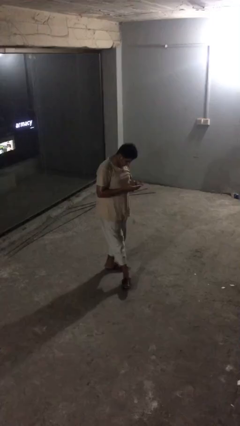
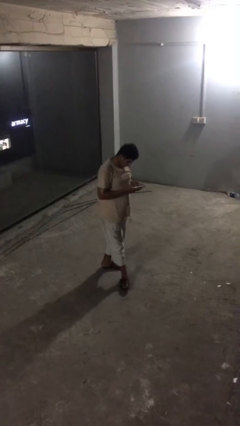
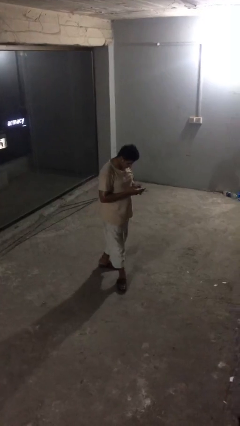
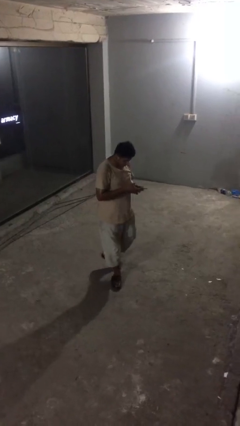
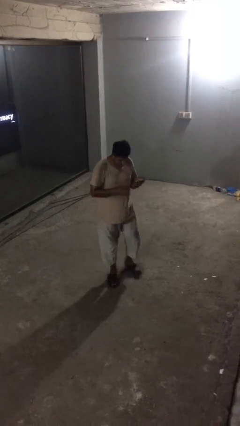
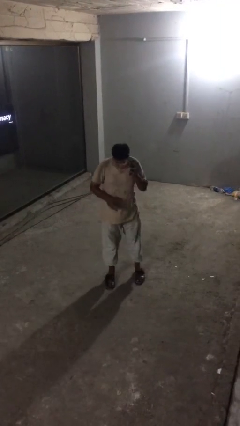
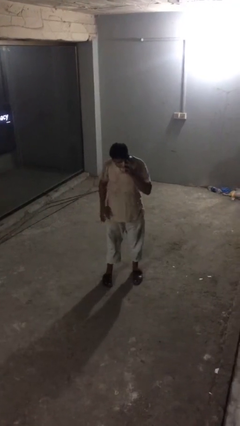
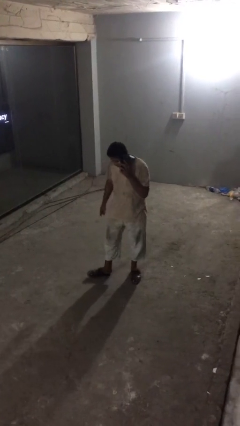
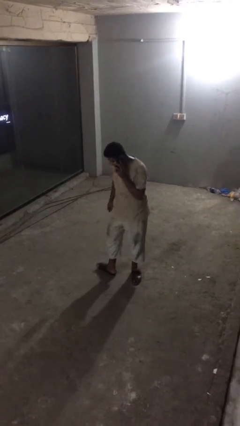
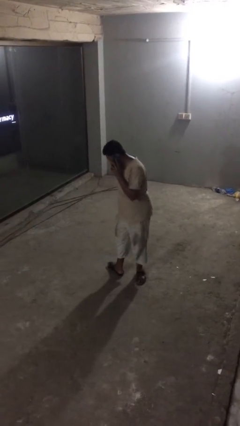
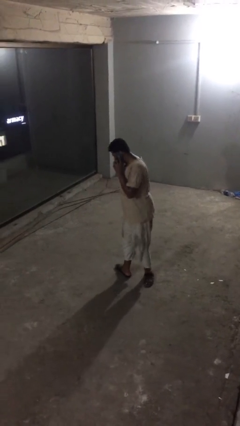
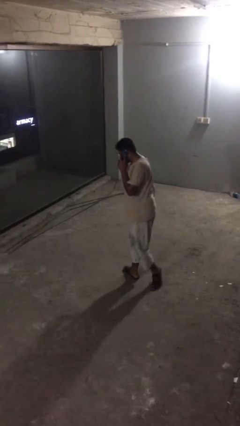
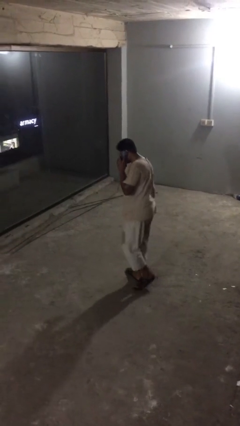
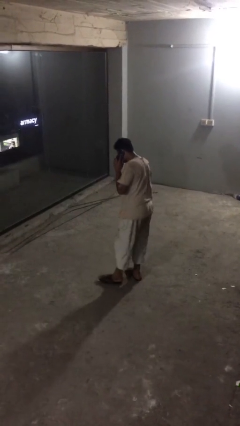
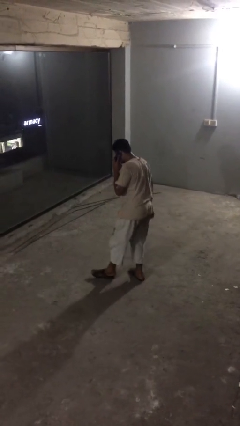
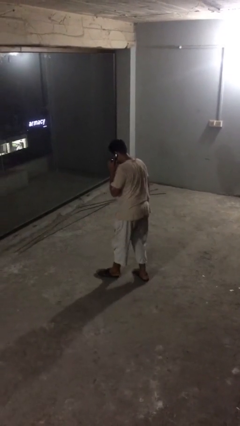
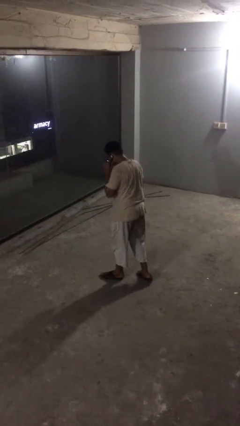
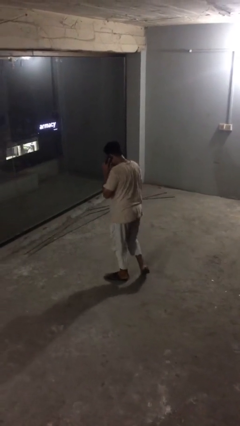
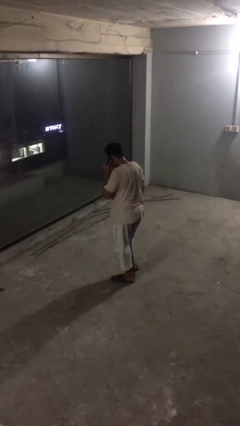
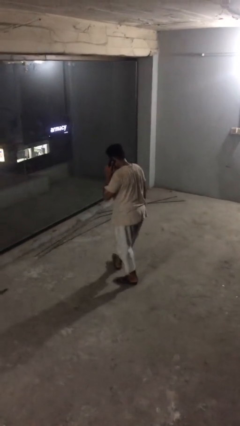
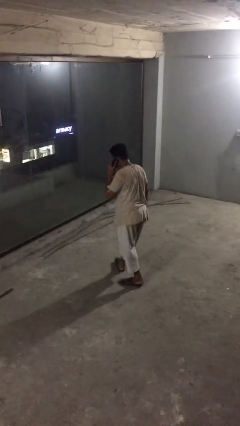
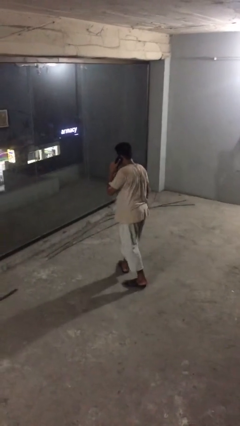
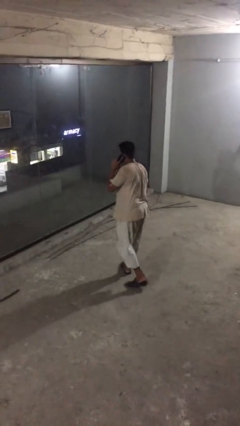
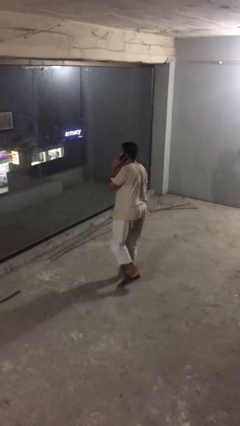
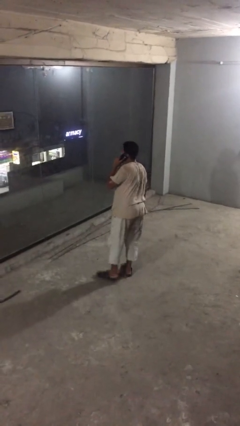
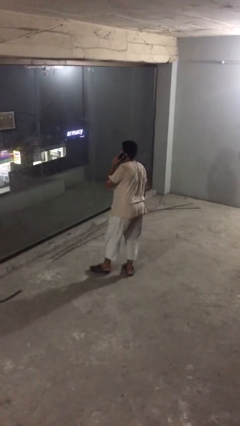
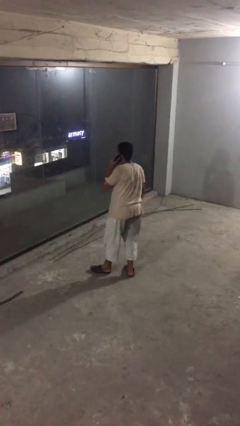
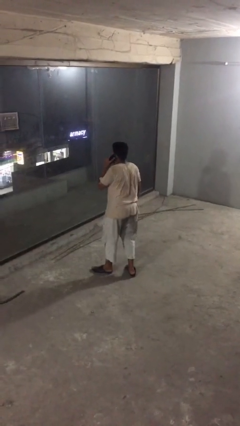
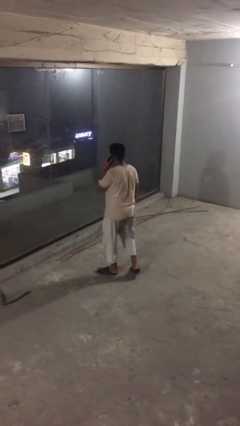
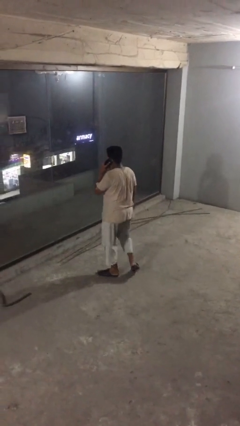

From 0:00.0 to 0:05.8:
person talks on phone

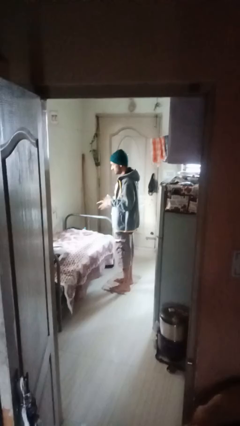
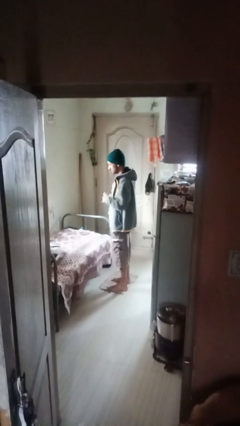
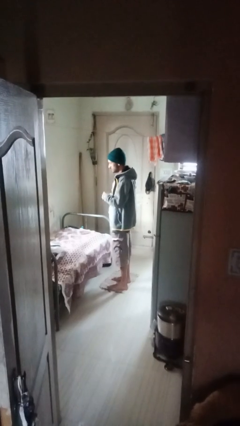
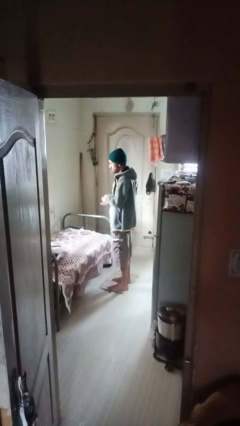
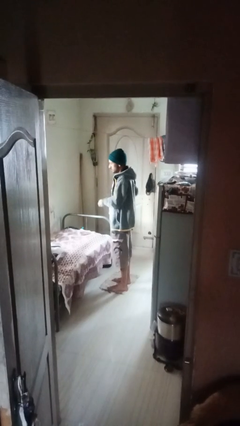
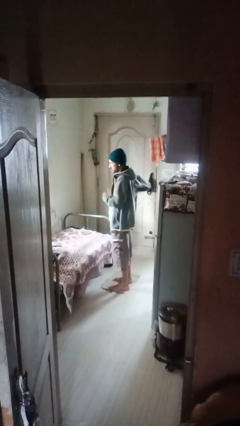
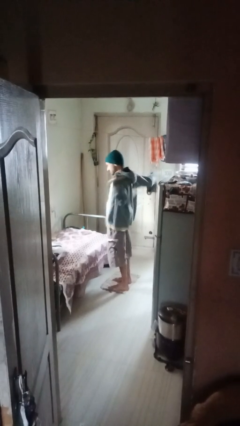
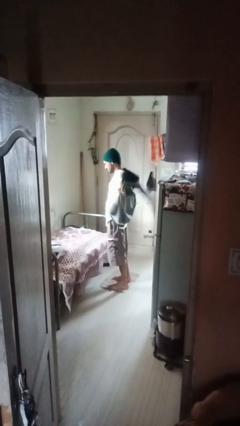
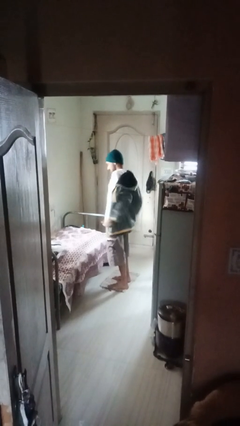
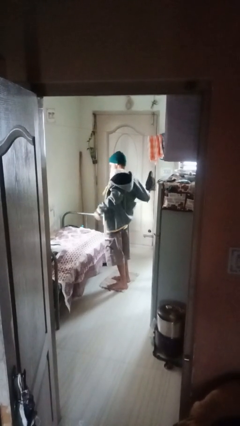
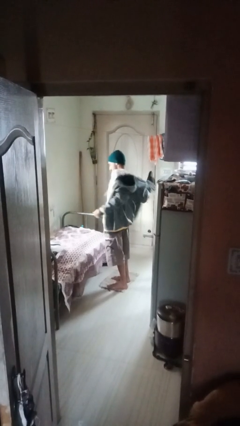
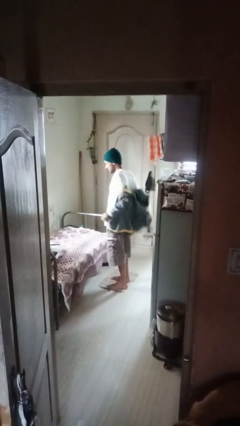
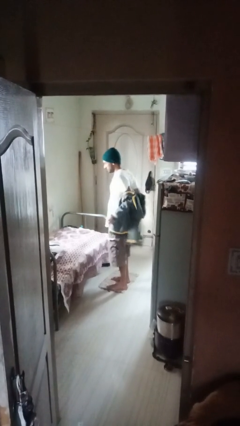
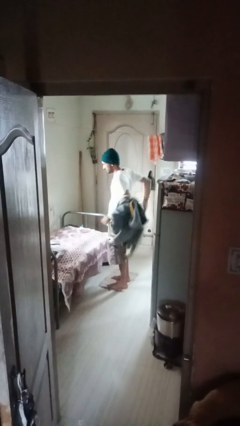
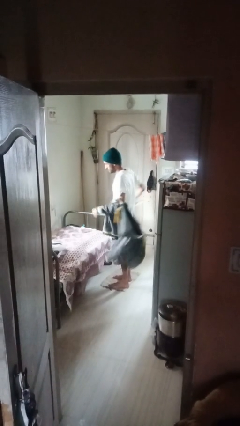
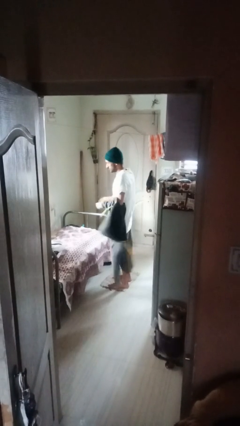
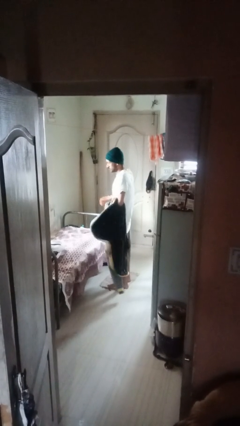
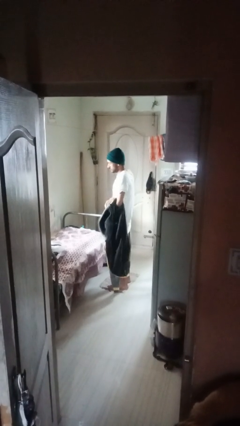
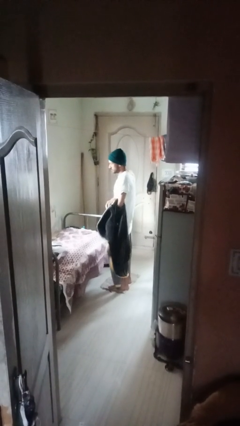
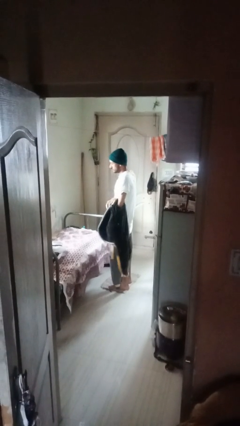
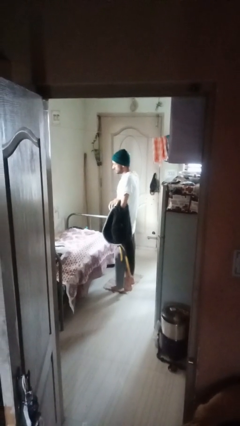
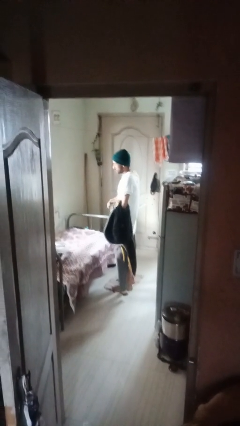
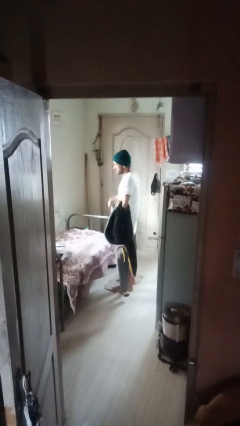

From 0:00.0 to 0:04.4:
person takes off shirt

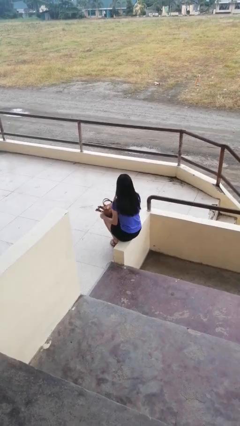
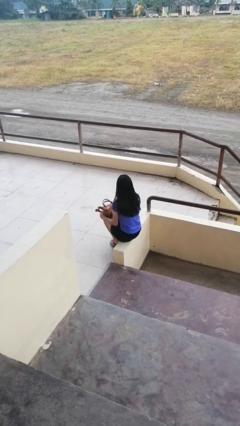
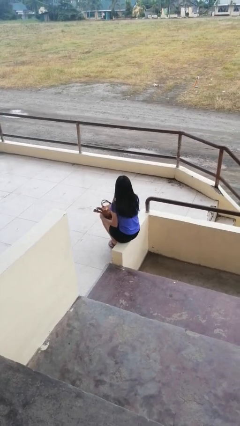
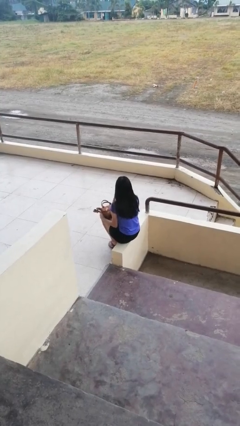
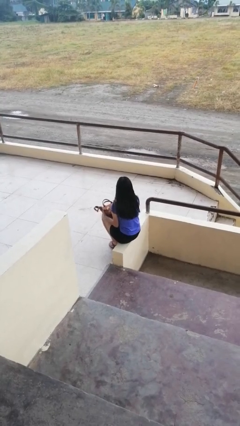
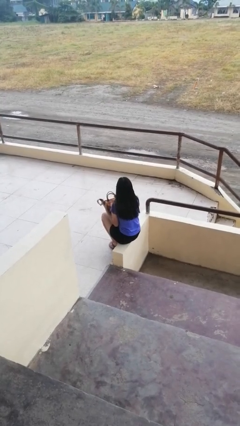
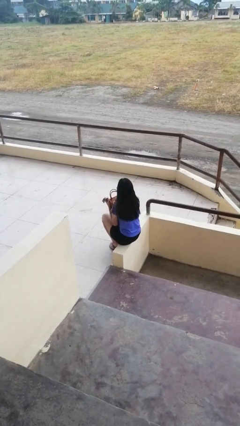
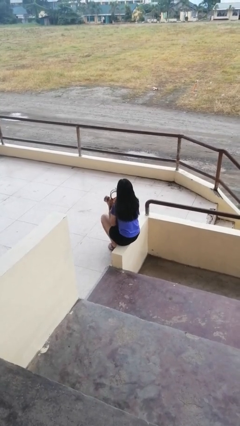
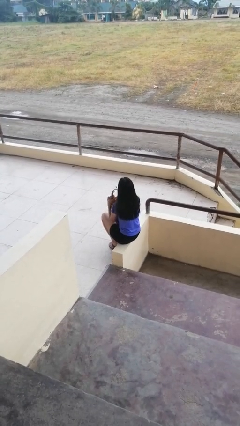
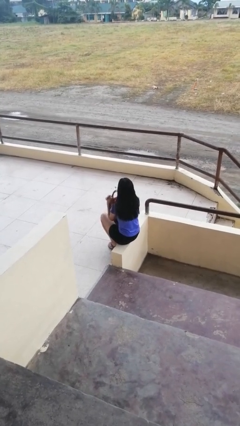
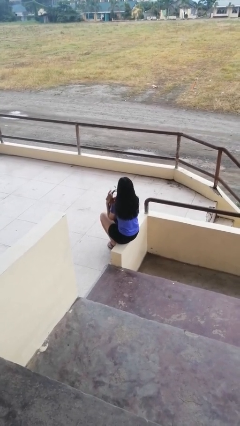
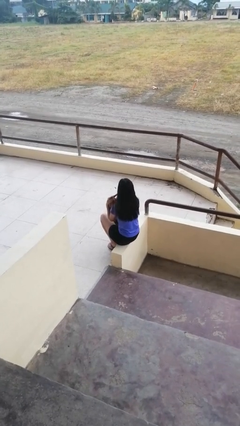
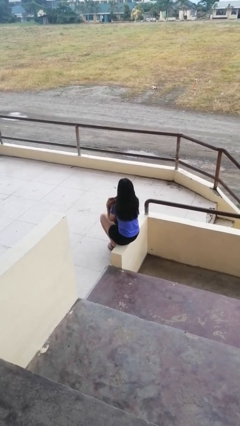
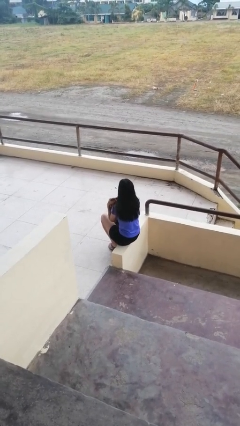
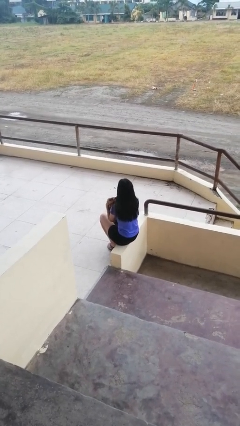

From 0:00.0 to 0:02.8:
person squeezes object

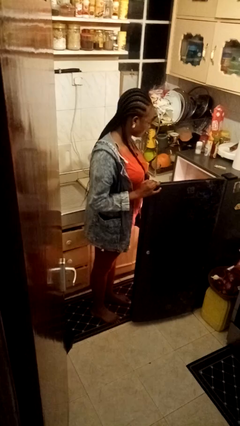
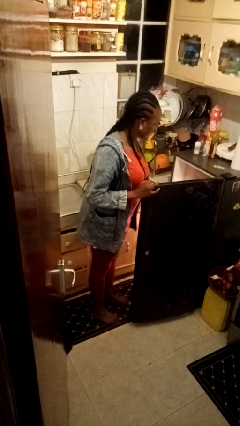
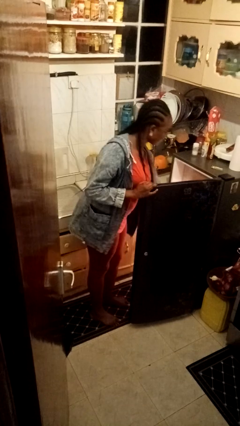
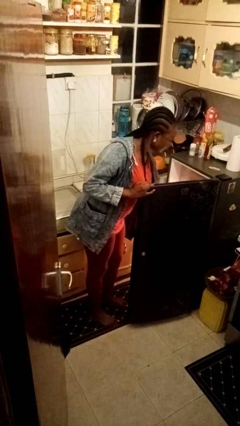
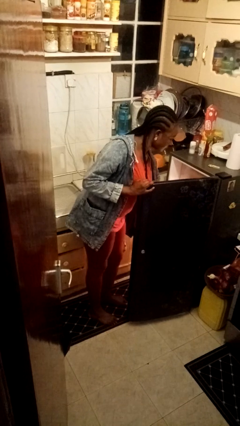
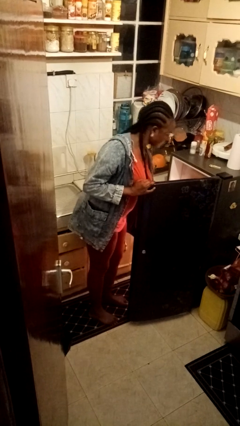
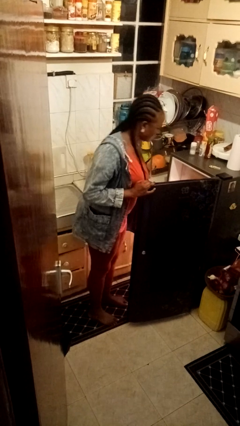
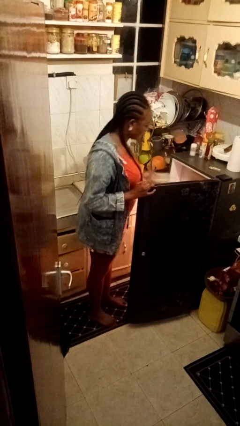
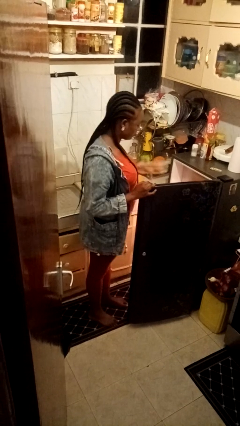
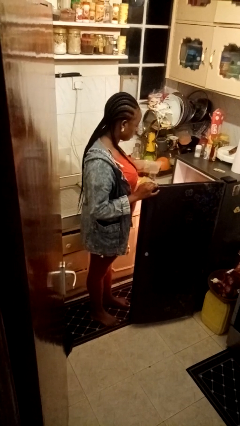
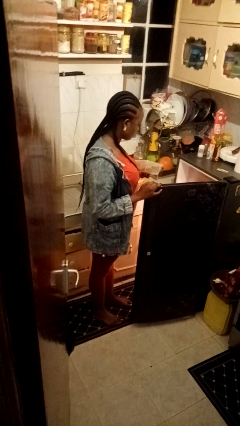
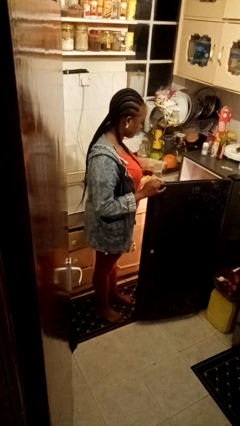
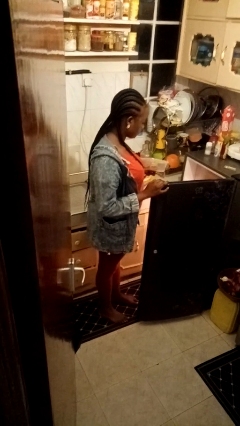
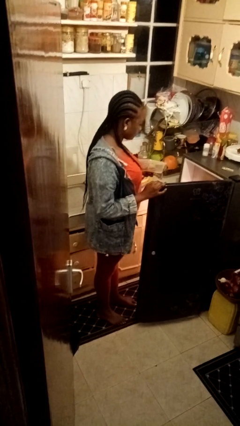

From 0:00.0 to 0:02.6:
person takes object from refrigerator

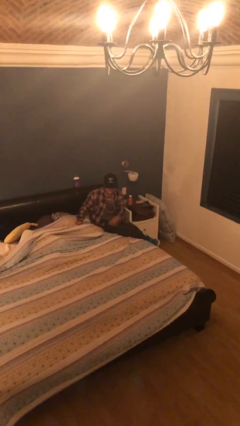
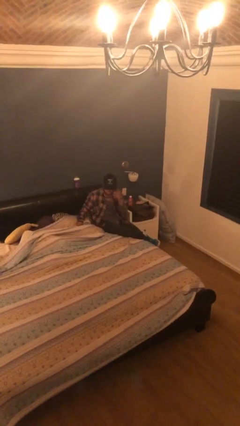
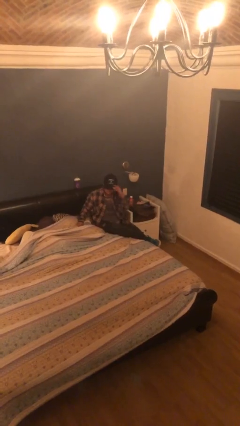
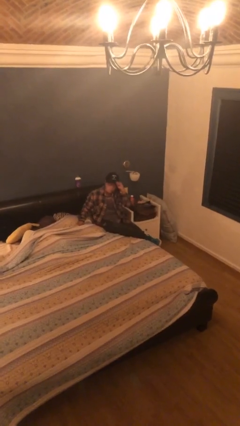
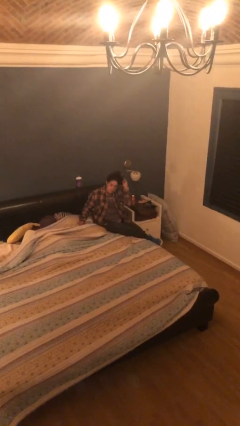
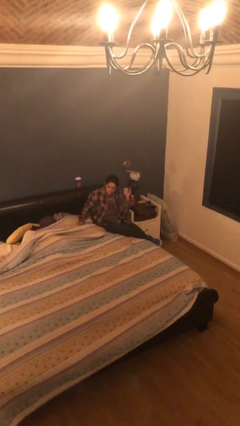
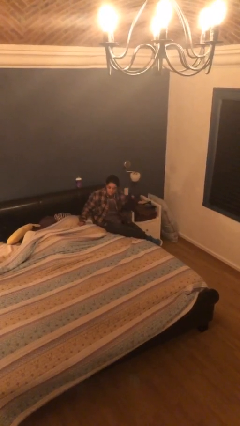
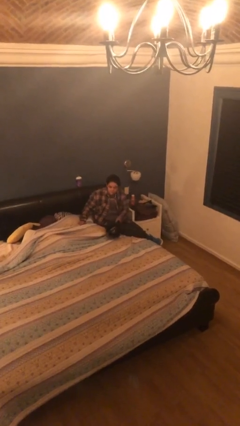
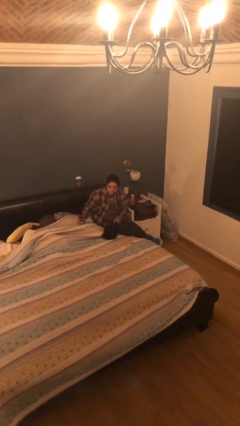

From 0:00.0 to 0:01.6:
person takes off hat

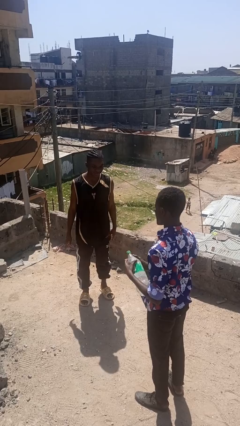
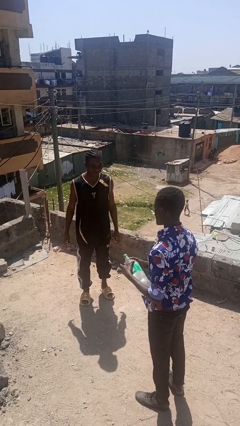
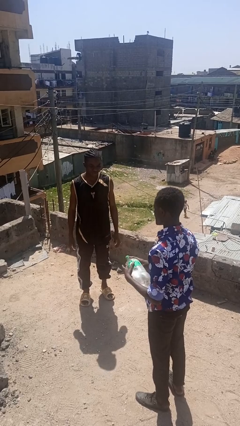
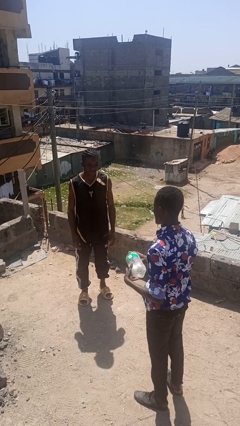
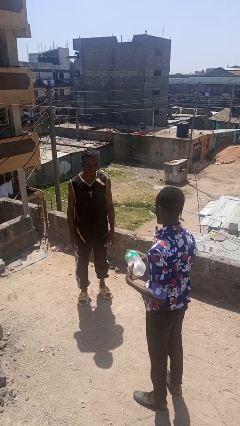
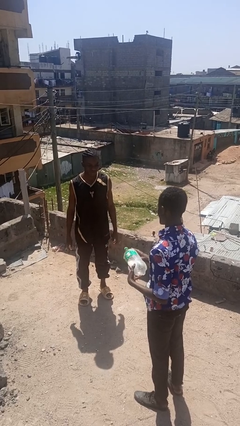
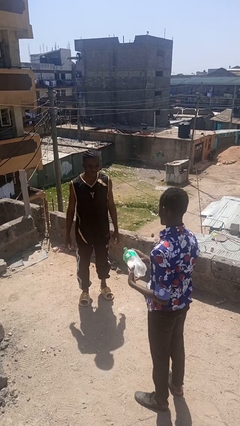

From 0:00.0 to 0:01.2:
person catches object from person
